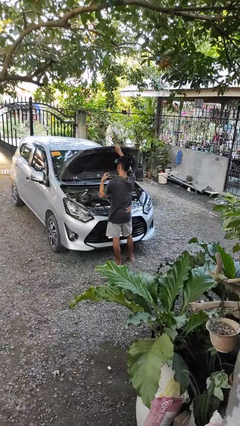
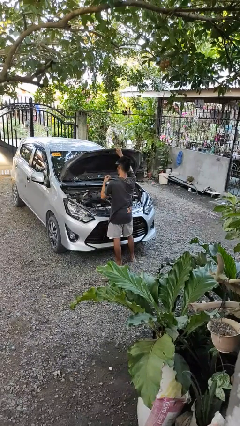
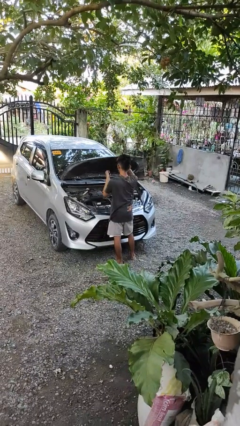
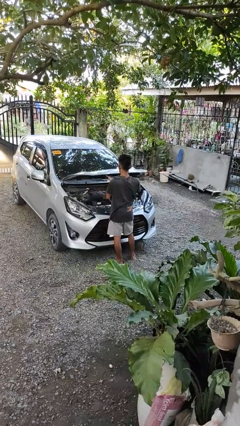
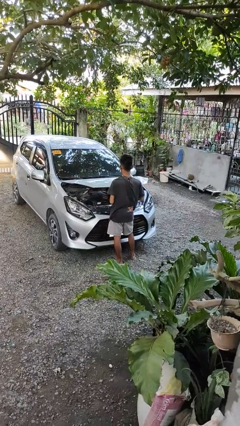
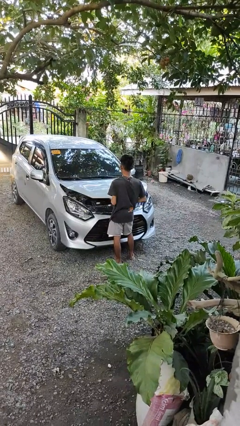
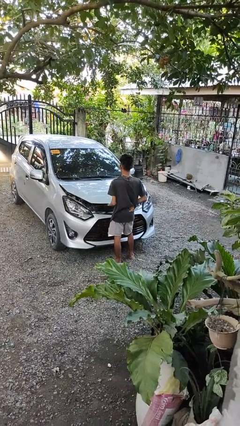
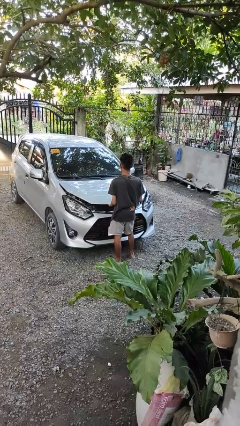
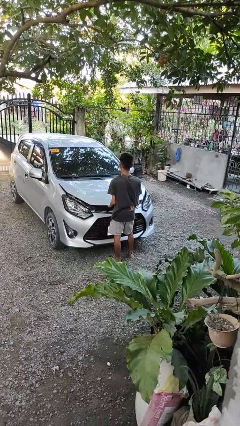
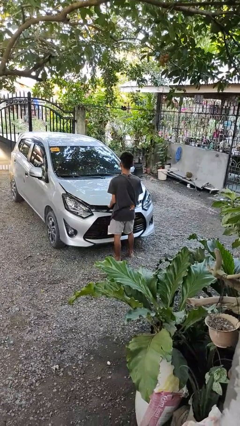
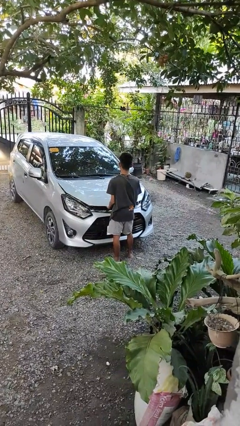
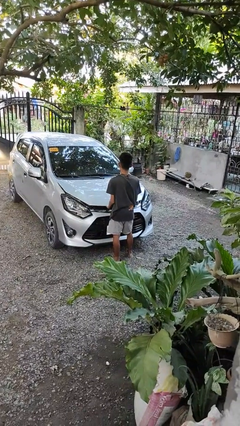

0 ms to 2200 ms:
person closes car hood

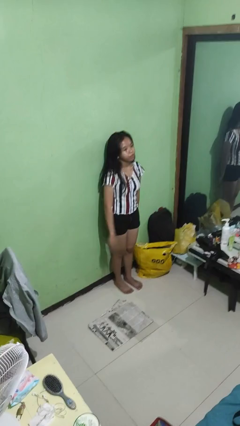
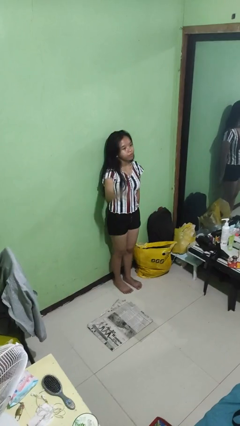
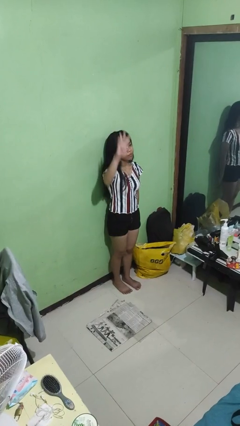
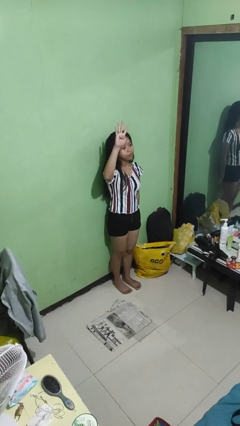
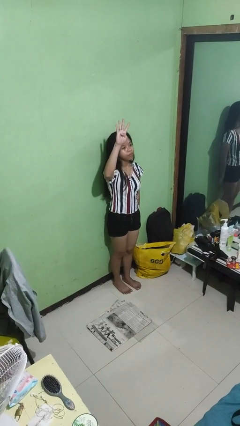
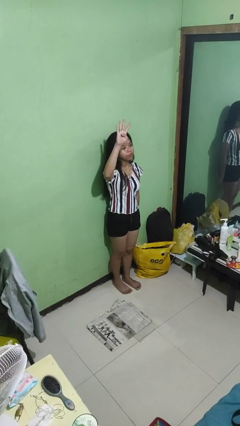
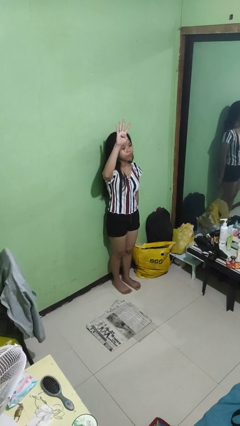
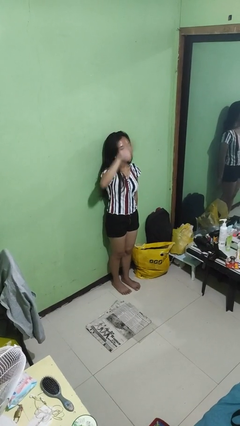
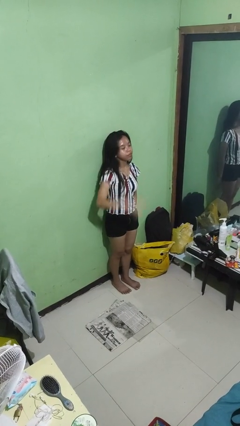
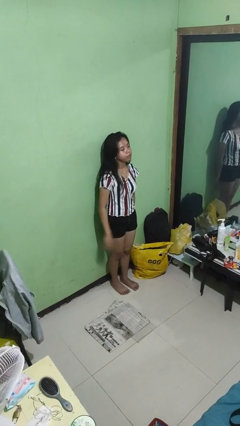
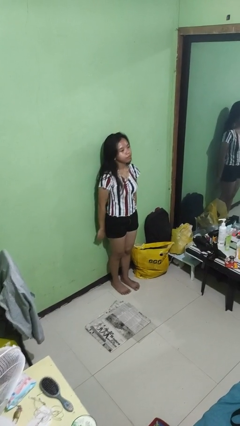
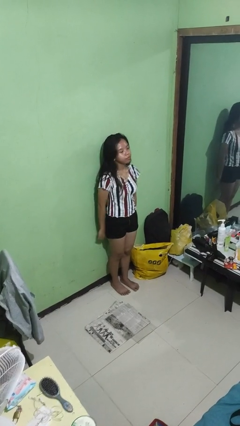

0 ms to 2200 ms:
person gestures number four

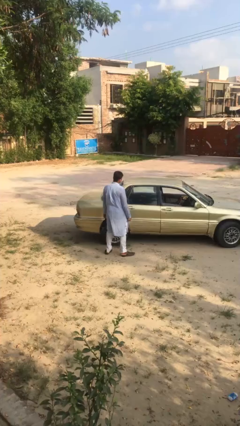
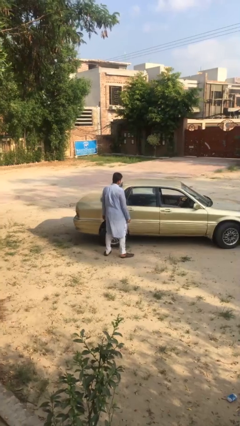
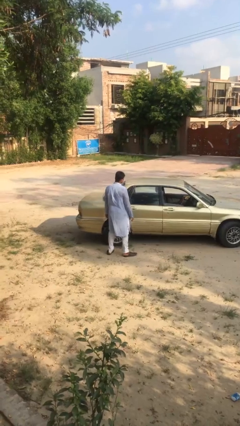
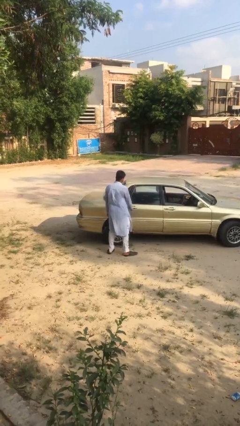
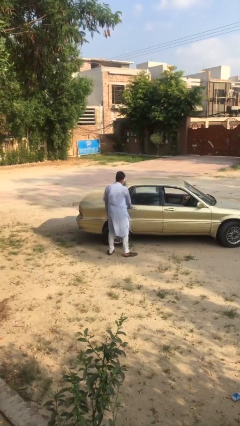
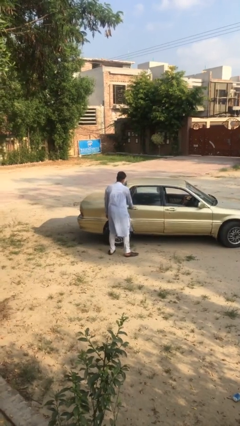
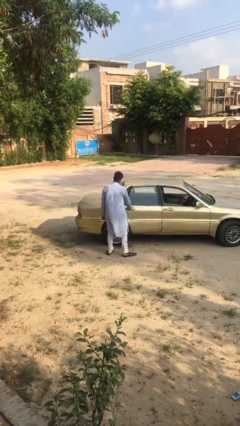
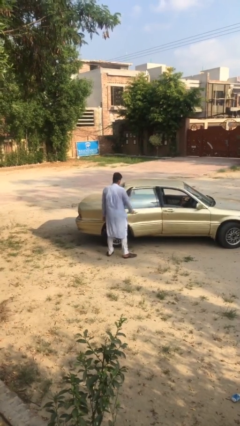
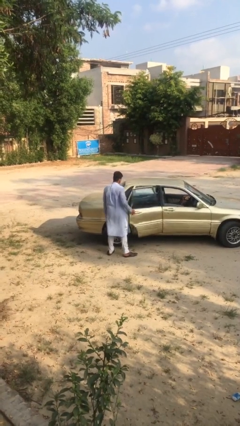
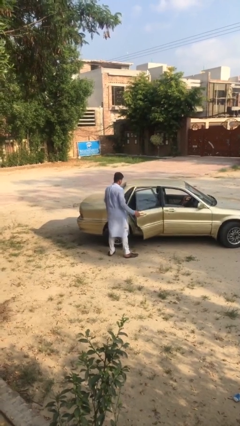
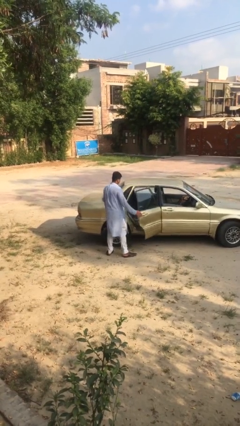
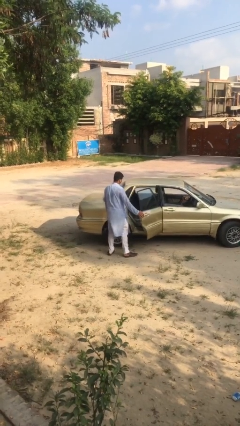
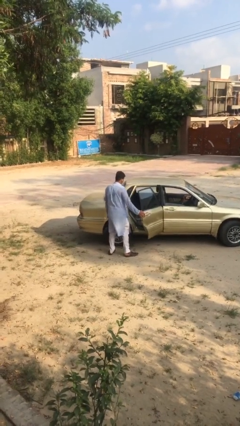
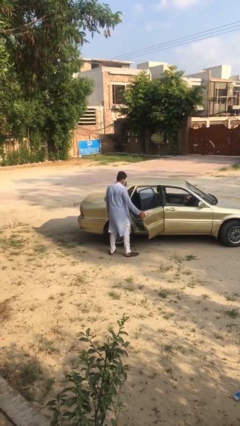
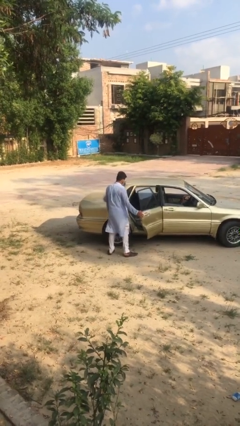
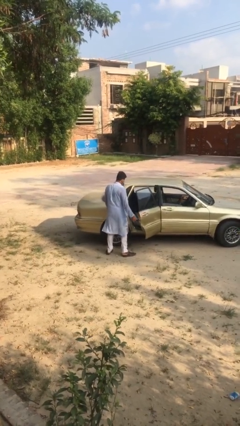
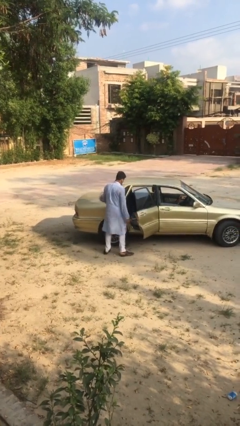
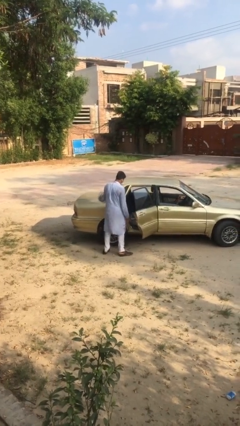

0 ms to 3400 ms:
person opens car door

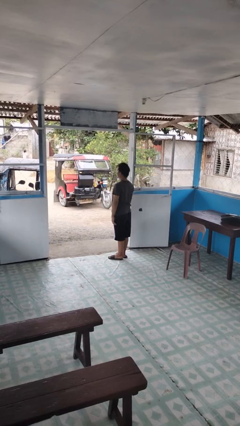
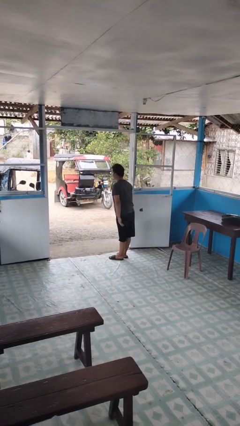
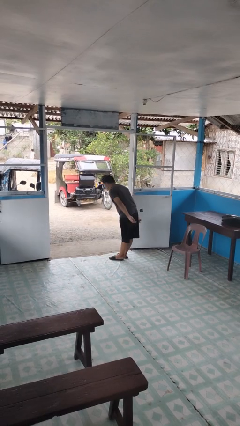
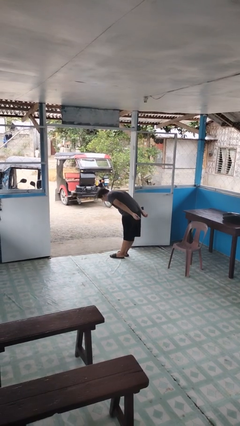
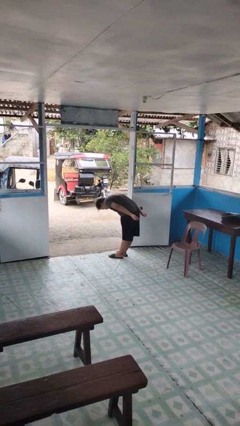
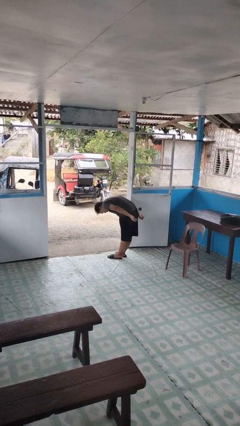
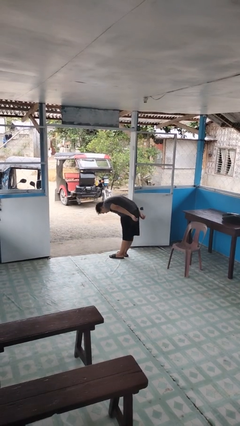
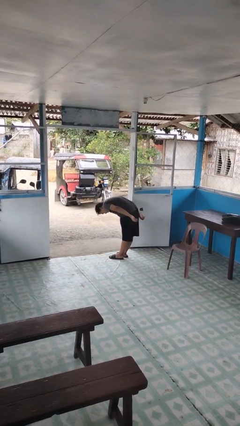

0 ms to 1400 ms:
person bows

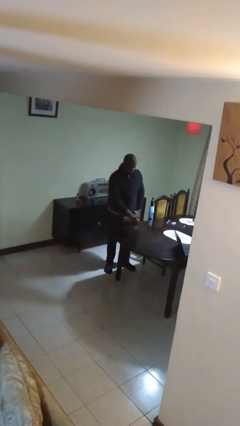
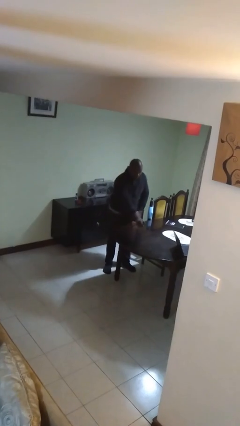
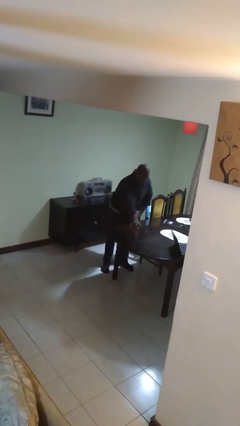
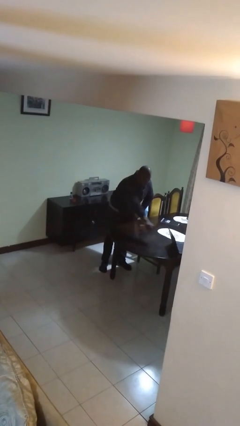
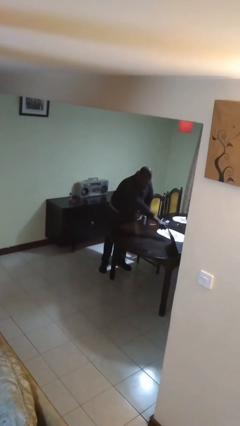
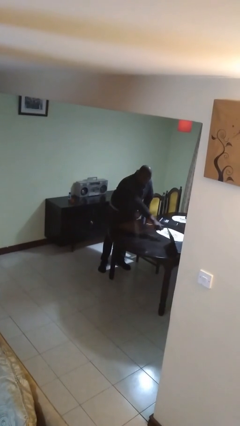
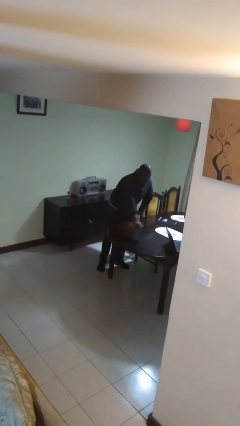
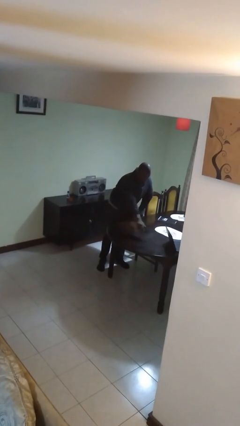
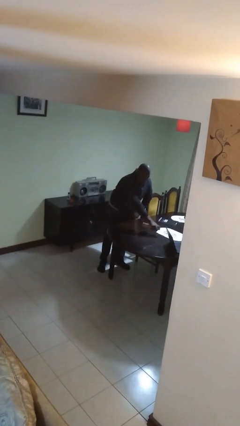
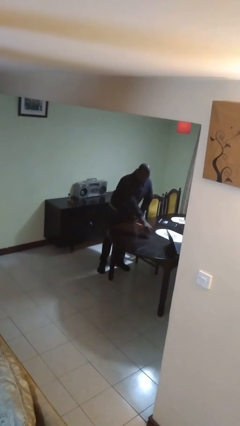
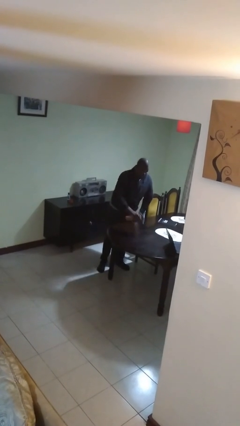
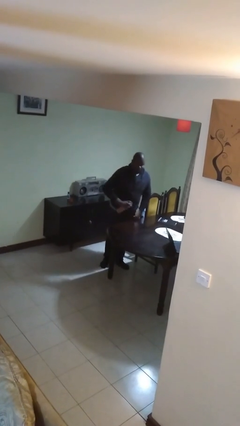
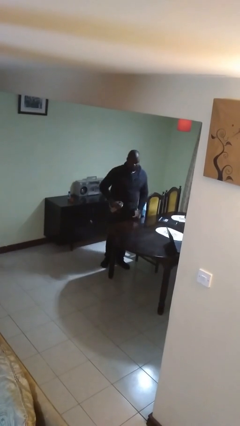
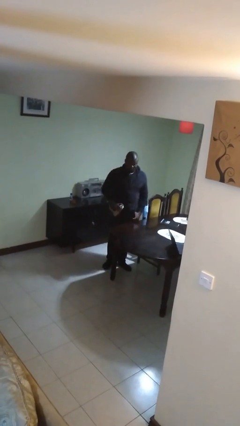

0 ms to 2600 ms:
person sprays from bottle

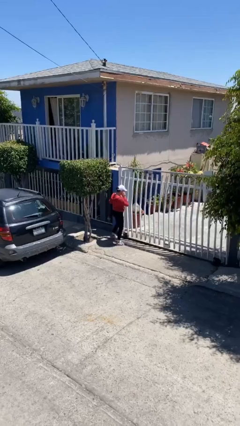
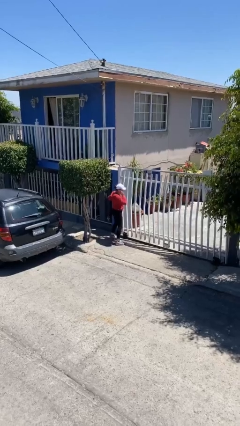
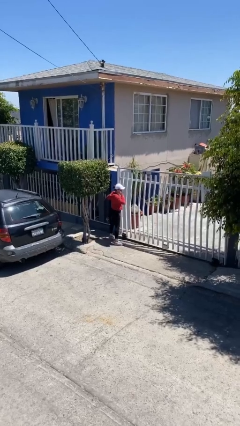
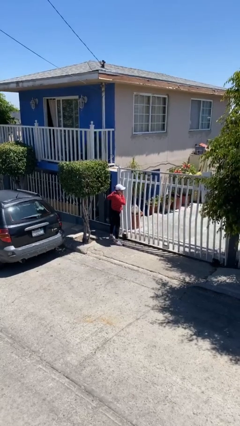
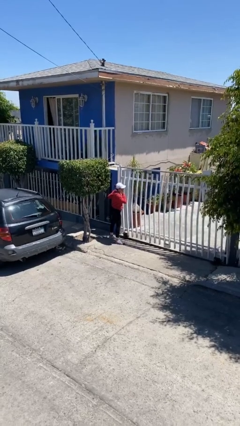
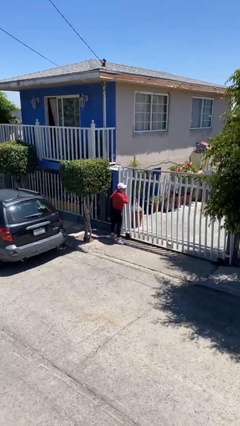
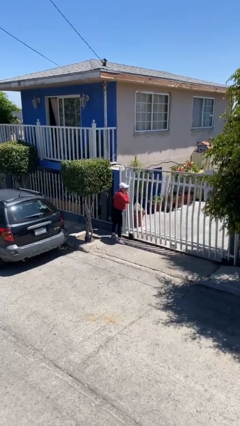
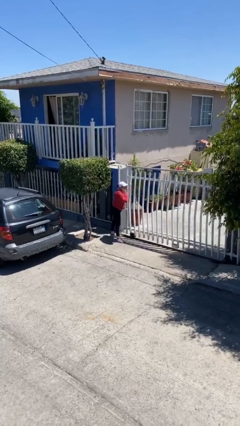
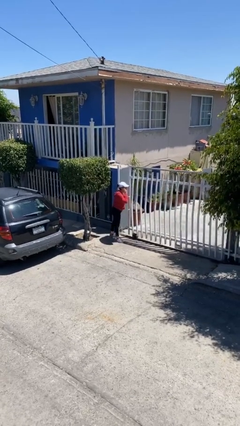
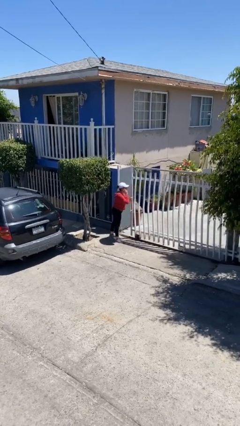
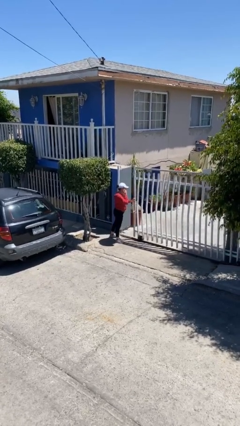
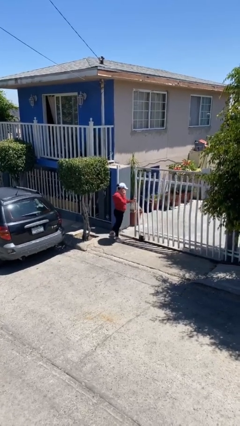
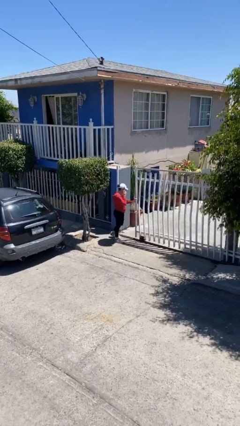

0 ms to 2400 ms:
person opens facility door

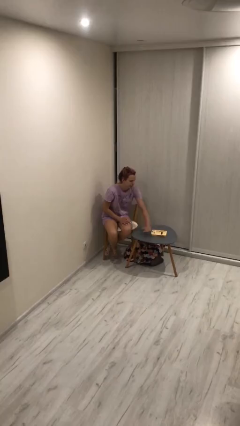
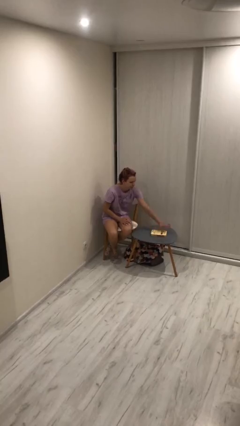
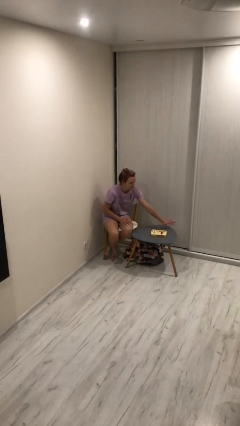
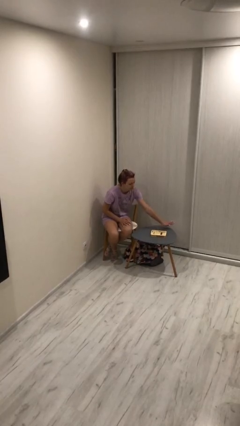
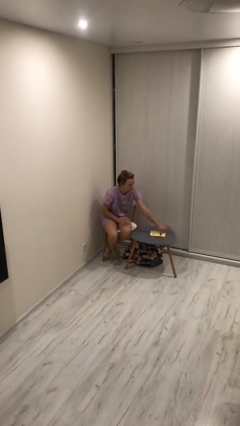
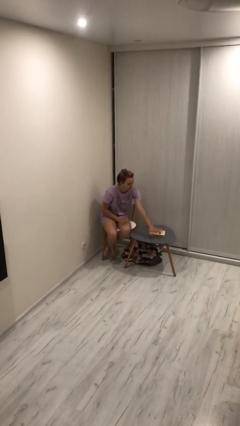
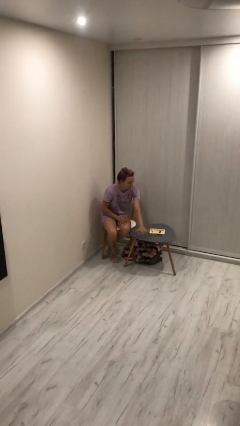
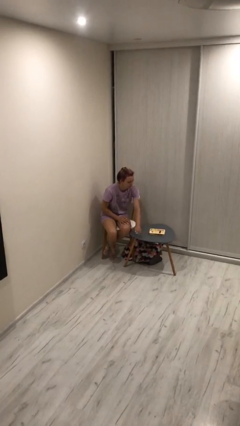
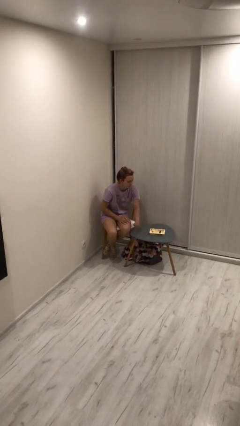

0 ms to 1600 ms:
person waves hand over object

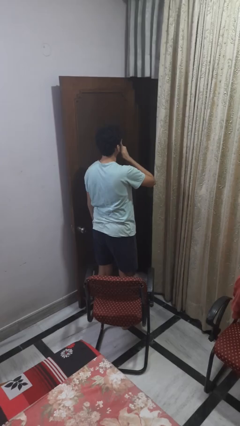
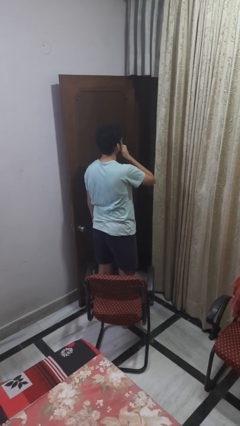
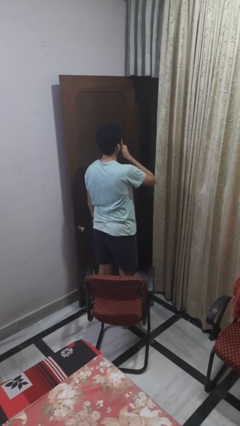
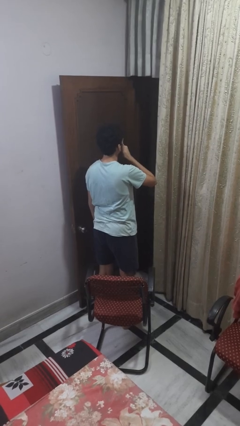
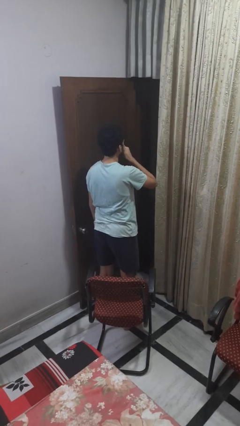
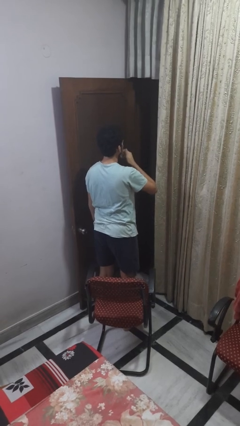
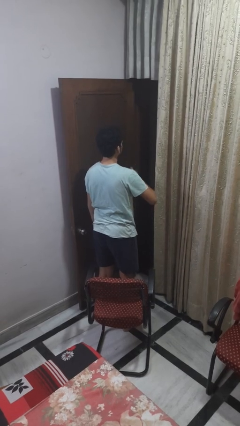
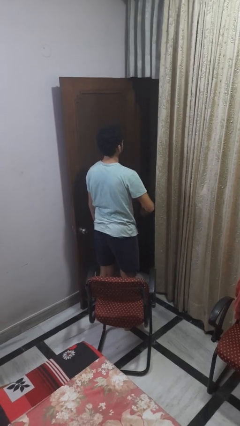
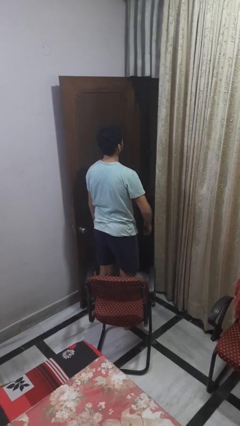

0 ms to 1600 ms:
person yawns
